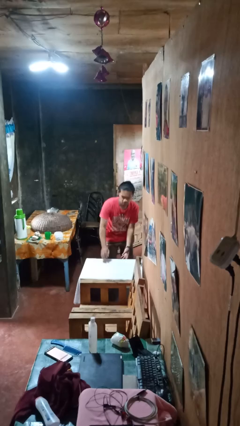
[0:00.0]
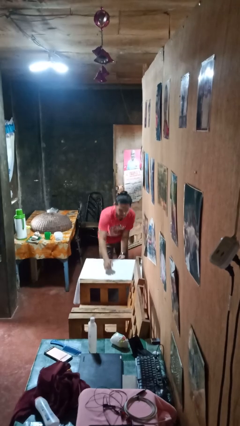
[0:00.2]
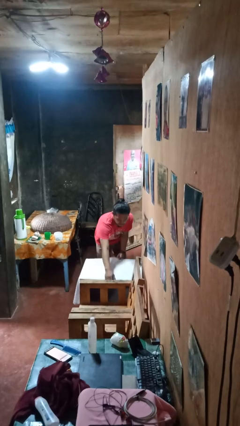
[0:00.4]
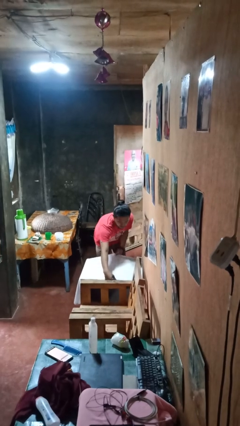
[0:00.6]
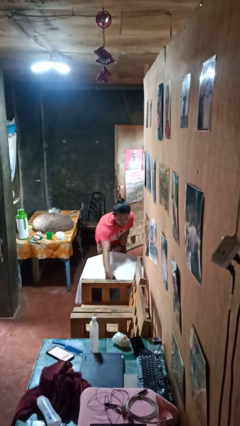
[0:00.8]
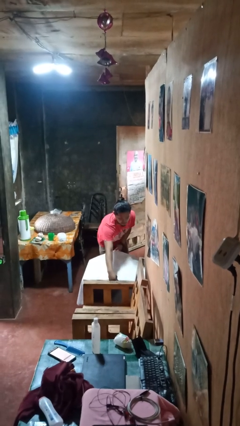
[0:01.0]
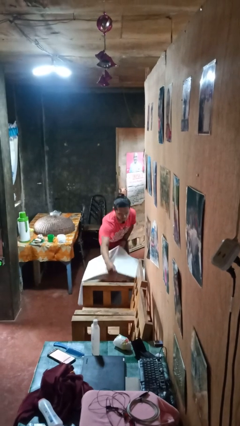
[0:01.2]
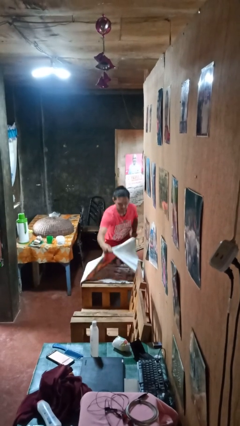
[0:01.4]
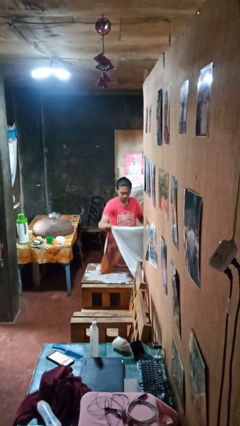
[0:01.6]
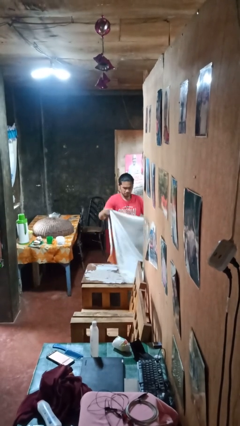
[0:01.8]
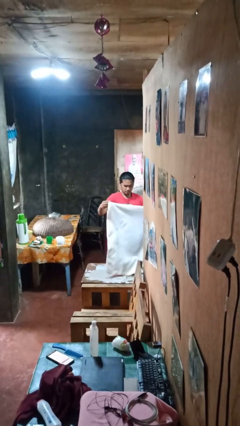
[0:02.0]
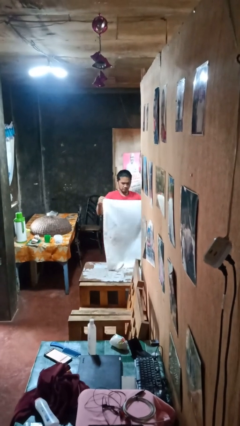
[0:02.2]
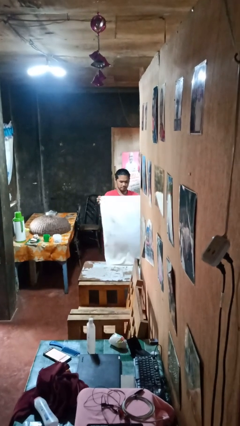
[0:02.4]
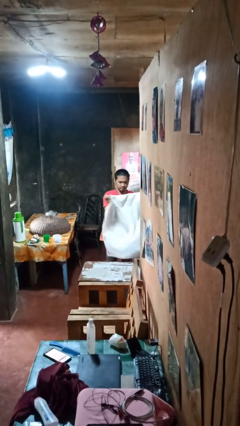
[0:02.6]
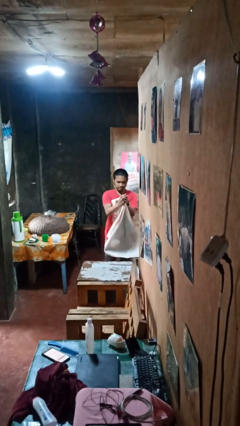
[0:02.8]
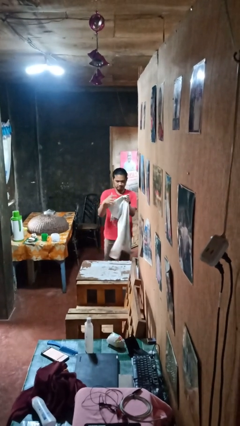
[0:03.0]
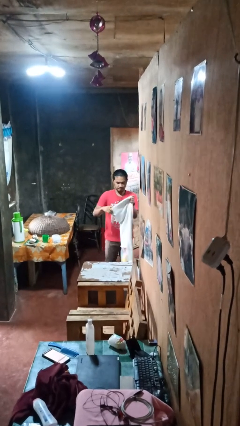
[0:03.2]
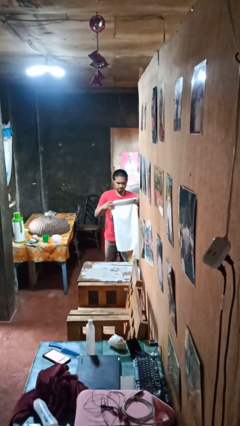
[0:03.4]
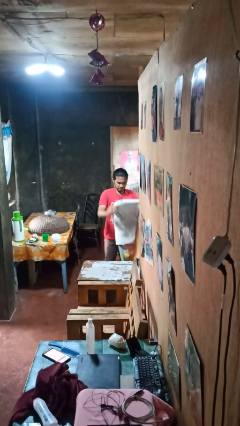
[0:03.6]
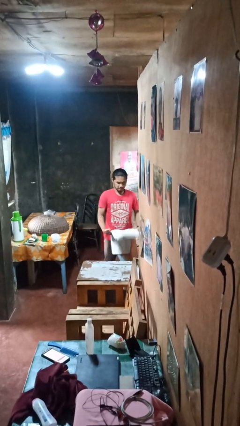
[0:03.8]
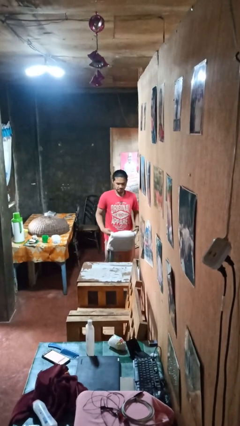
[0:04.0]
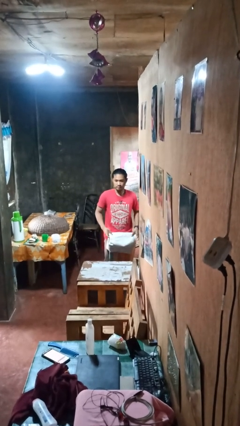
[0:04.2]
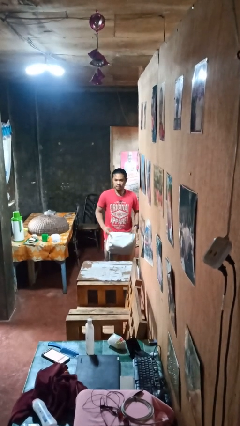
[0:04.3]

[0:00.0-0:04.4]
person folds tablecloth

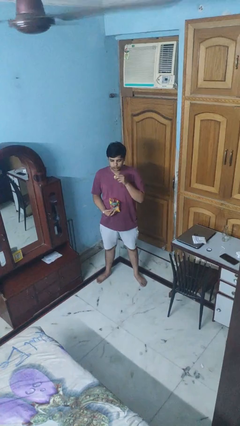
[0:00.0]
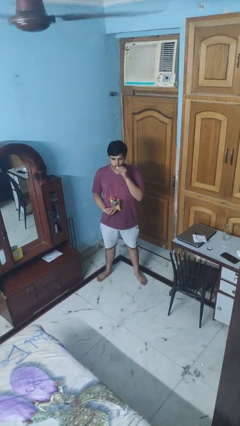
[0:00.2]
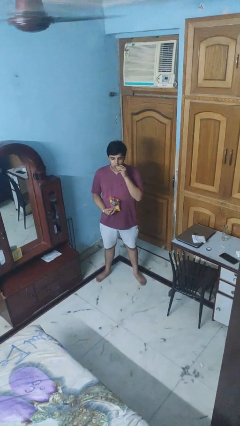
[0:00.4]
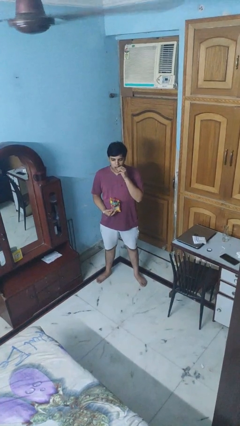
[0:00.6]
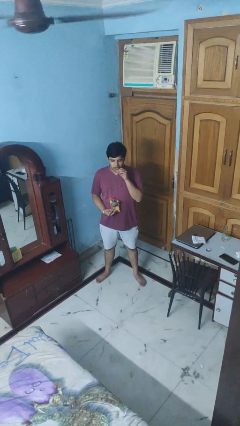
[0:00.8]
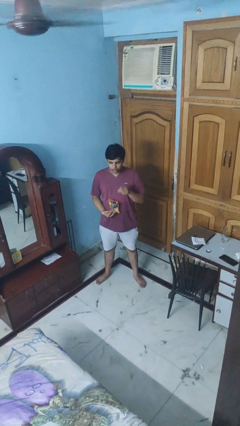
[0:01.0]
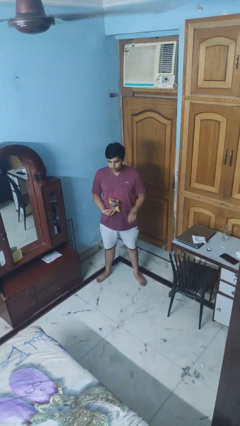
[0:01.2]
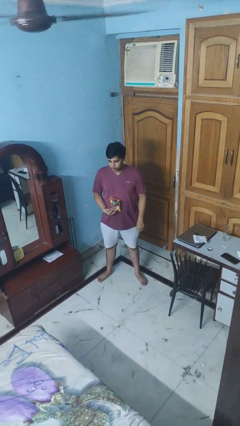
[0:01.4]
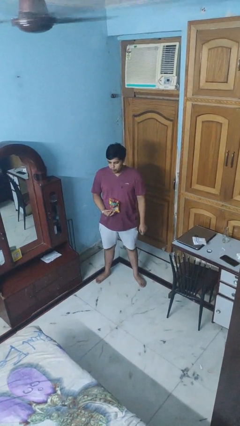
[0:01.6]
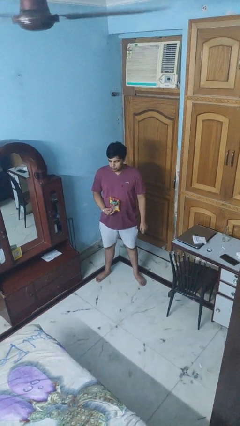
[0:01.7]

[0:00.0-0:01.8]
person eats snack from bag

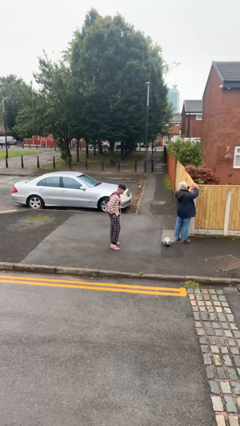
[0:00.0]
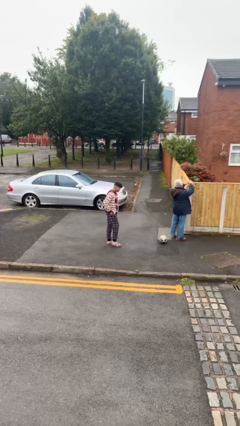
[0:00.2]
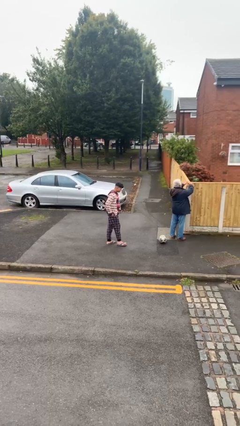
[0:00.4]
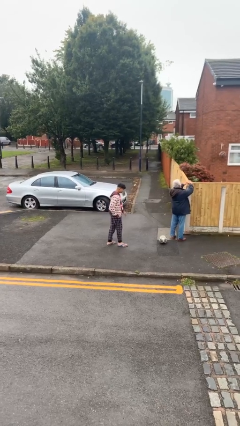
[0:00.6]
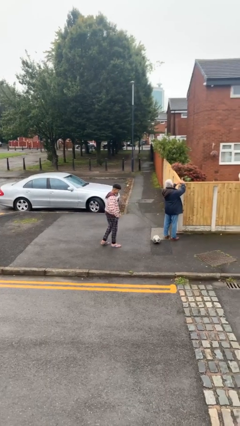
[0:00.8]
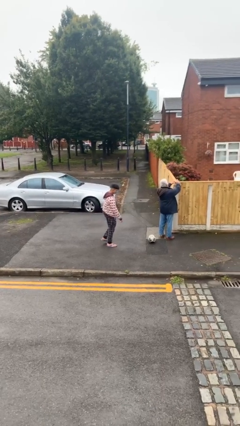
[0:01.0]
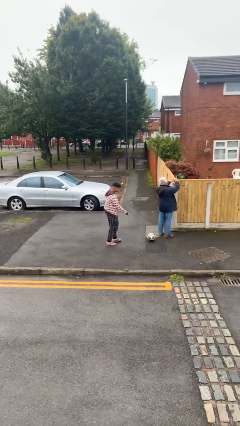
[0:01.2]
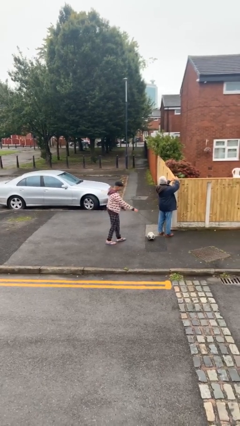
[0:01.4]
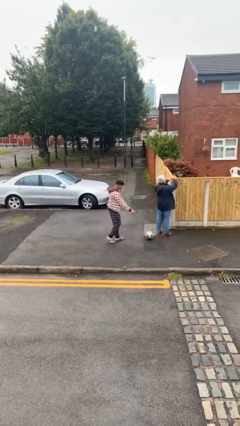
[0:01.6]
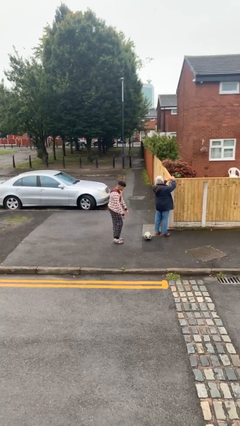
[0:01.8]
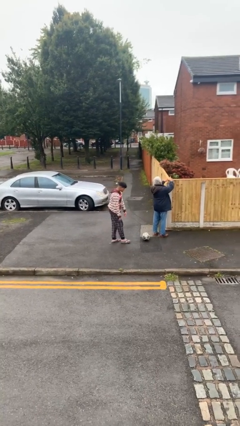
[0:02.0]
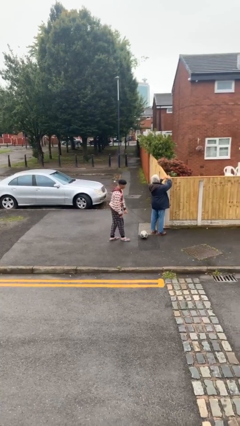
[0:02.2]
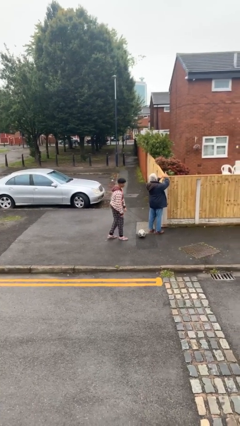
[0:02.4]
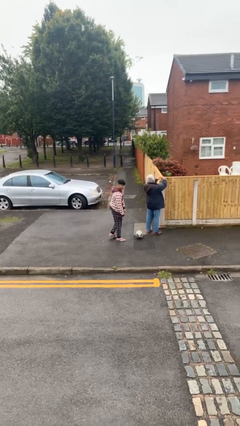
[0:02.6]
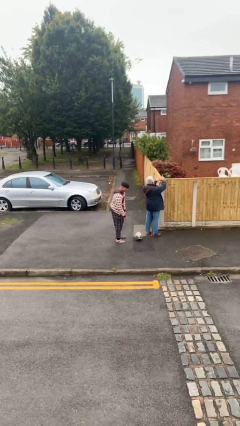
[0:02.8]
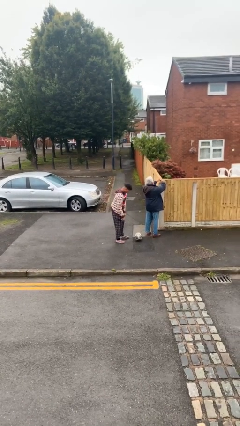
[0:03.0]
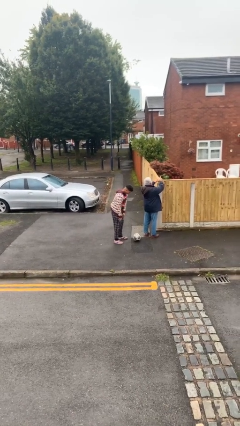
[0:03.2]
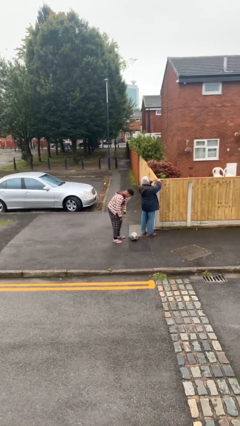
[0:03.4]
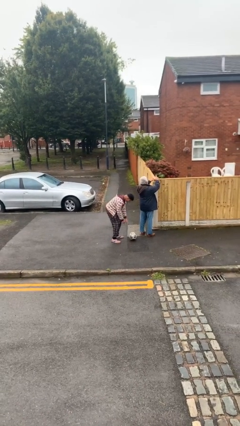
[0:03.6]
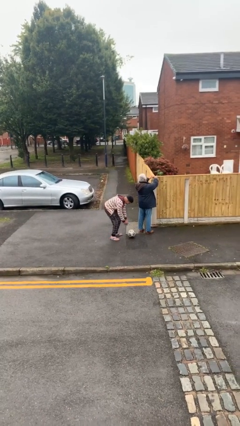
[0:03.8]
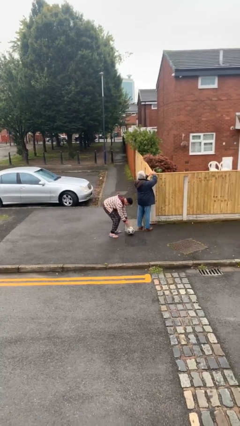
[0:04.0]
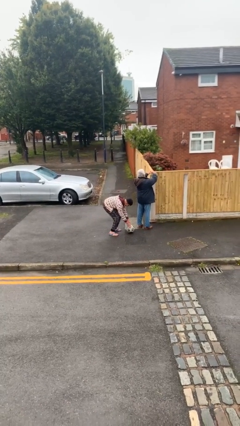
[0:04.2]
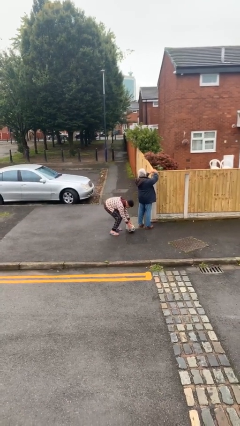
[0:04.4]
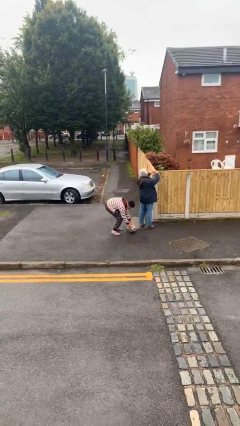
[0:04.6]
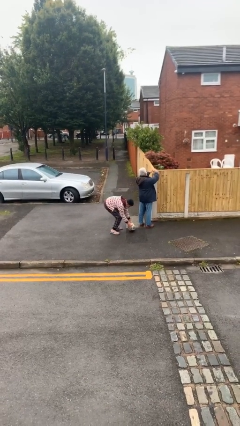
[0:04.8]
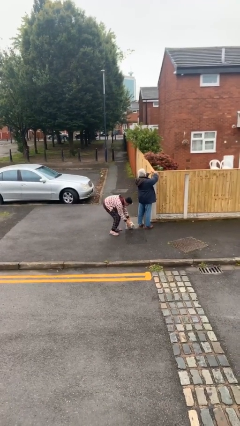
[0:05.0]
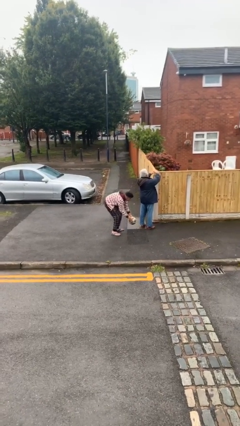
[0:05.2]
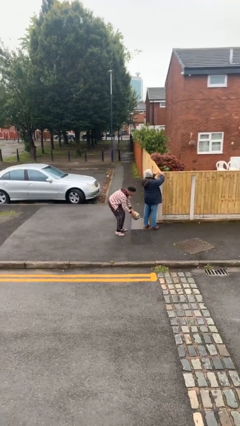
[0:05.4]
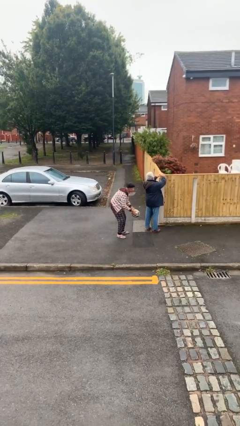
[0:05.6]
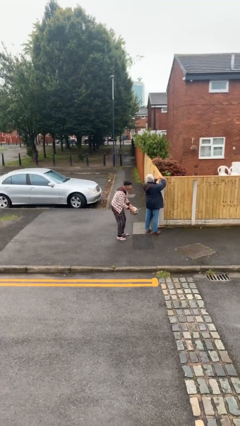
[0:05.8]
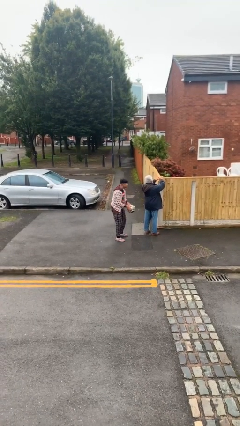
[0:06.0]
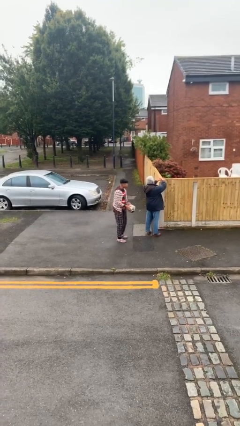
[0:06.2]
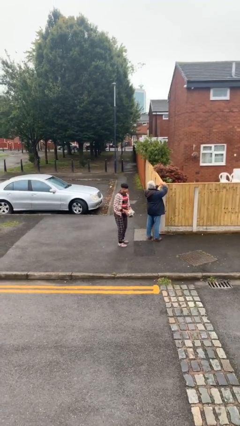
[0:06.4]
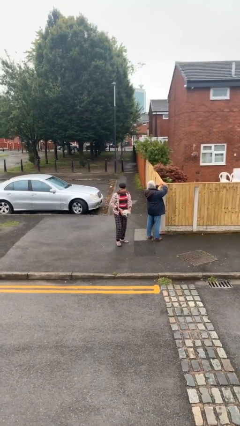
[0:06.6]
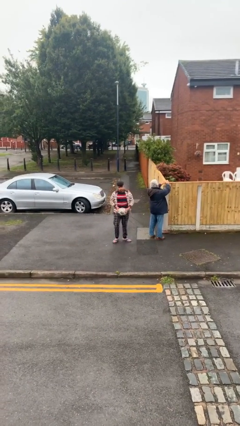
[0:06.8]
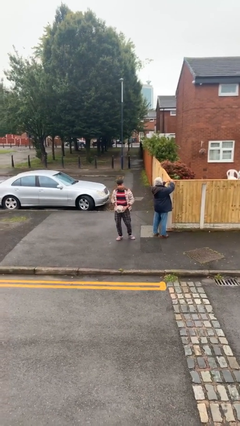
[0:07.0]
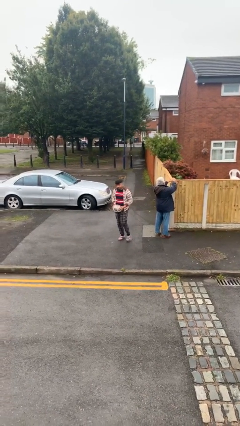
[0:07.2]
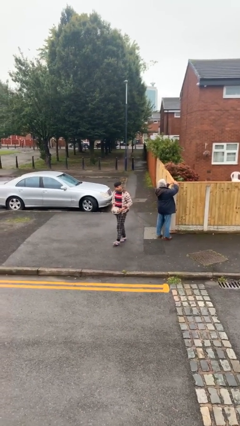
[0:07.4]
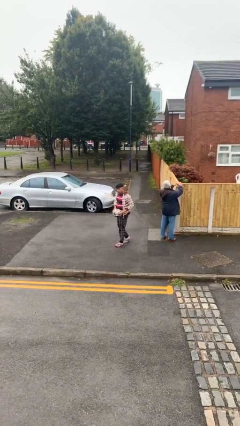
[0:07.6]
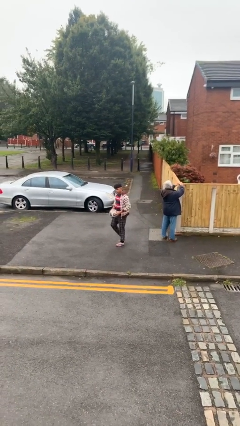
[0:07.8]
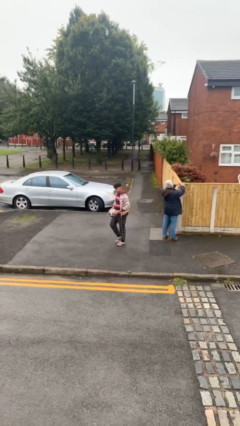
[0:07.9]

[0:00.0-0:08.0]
person steals object from person

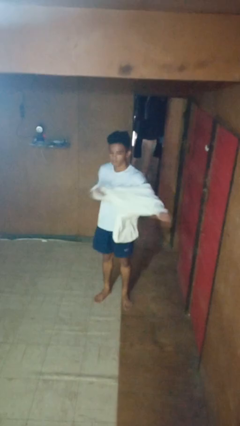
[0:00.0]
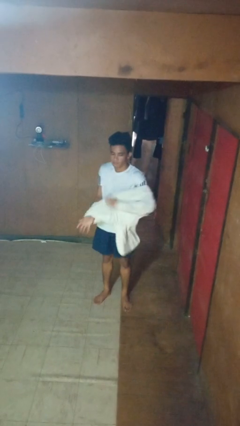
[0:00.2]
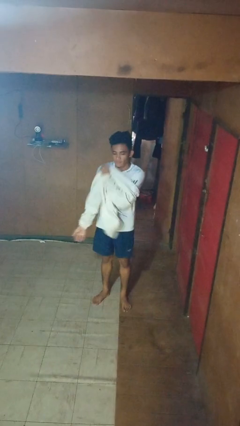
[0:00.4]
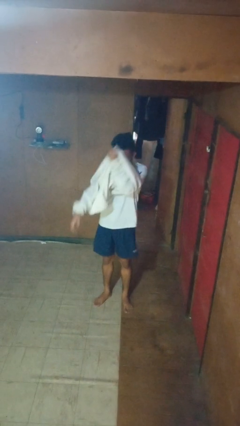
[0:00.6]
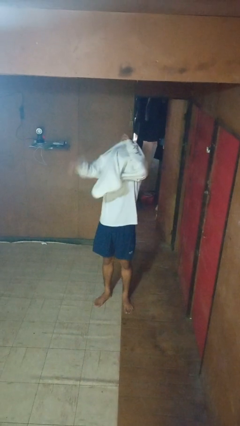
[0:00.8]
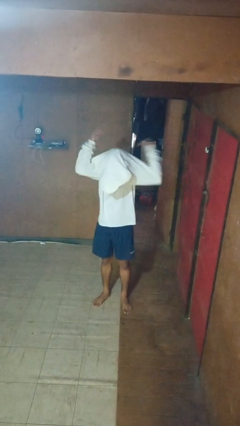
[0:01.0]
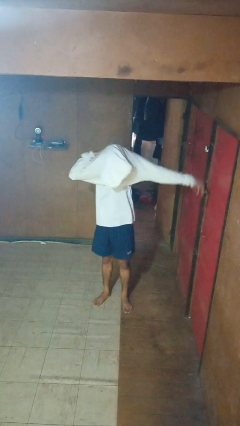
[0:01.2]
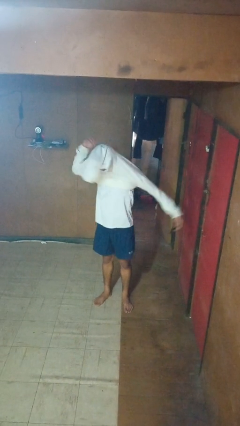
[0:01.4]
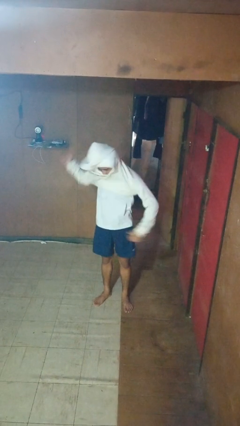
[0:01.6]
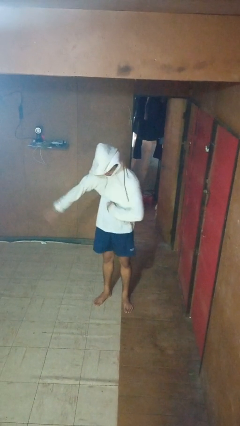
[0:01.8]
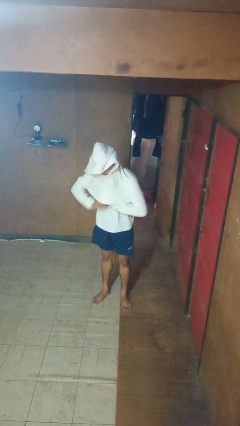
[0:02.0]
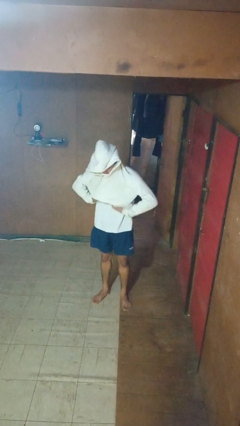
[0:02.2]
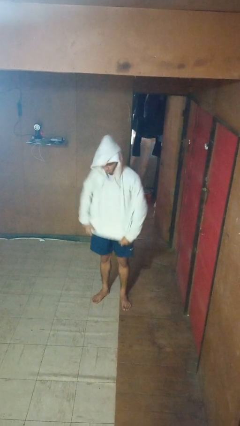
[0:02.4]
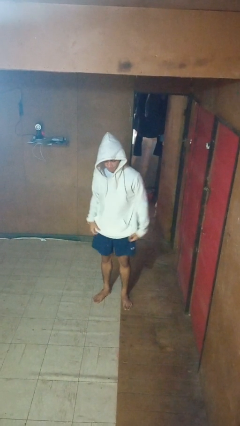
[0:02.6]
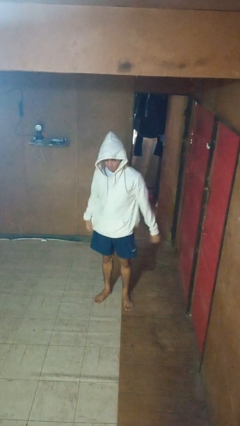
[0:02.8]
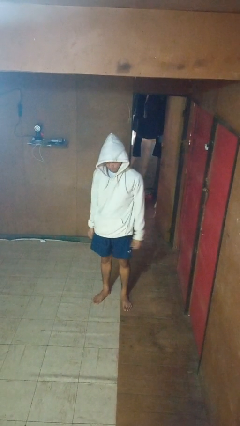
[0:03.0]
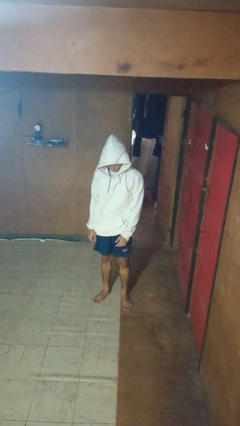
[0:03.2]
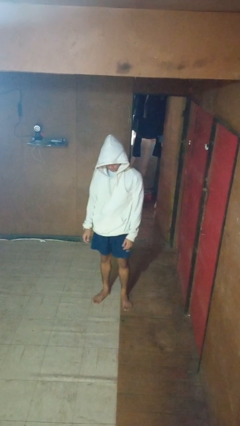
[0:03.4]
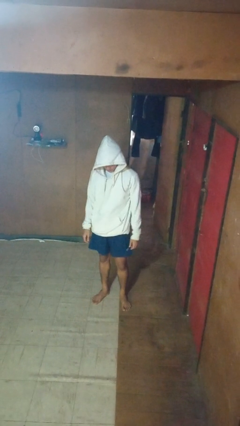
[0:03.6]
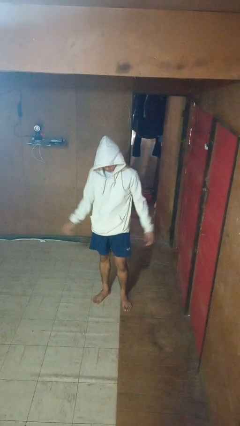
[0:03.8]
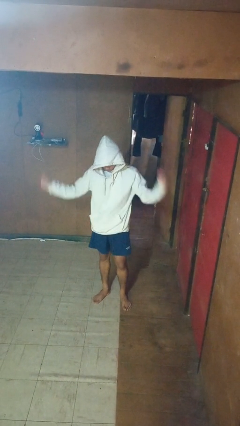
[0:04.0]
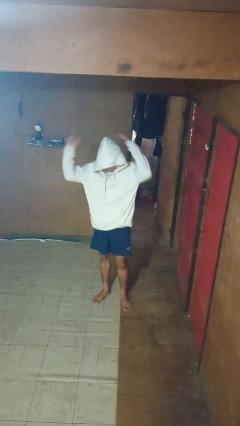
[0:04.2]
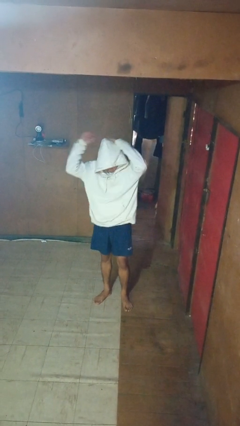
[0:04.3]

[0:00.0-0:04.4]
person puts on hoodie
